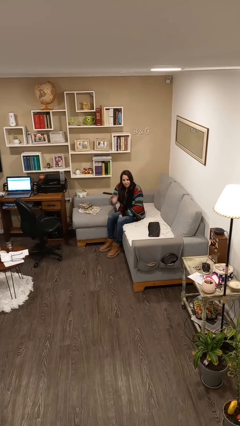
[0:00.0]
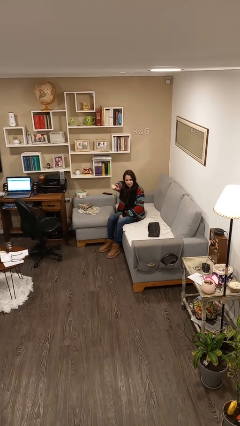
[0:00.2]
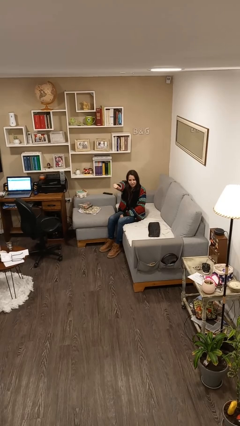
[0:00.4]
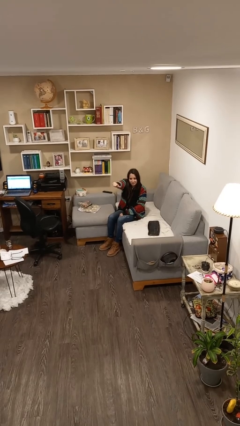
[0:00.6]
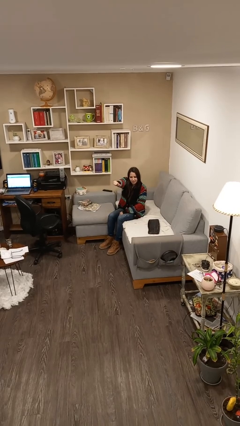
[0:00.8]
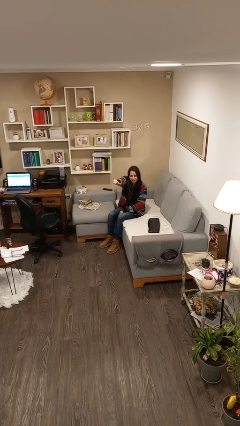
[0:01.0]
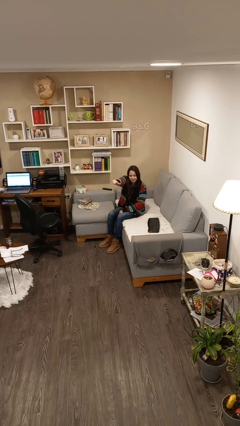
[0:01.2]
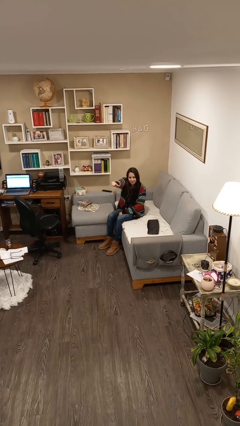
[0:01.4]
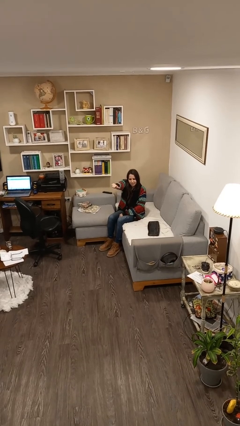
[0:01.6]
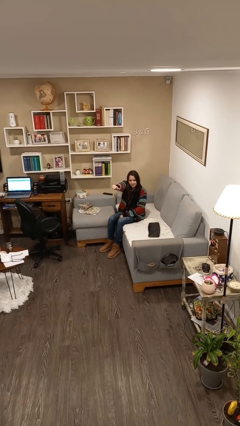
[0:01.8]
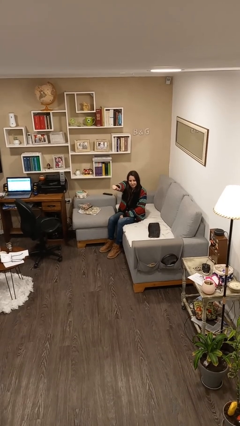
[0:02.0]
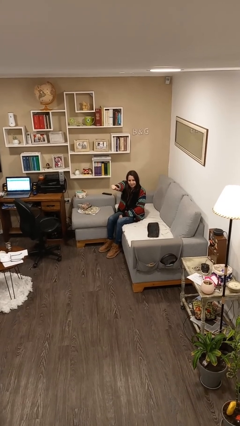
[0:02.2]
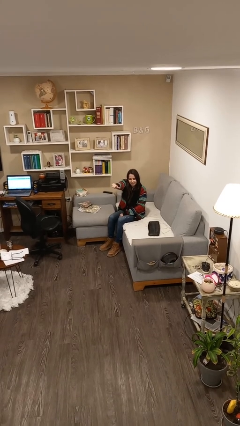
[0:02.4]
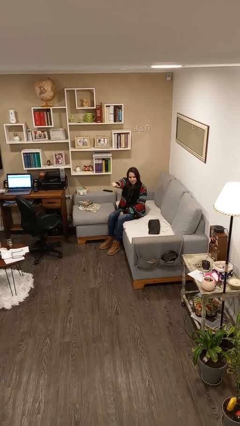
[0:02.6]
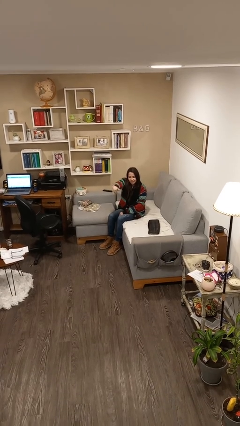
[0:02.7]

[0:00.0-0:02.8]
person gestures thumbs up

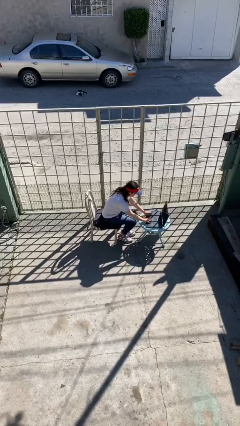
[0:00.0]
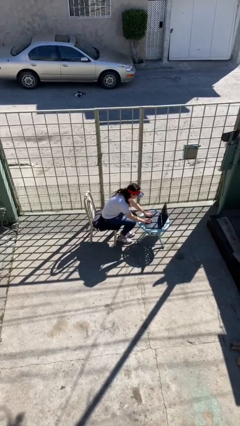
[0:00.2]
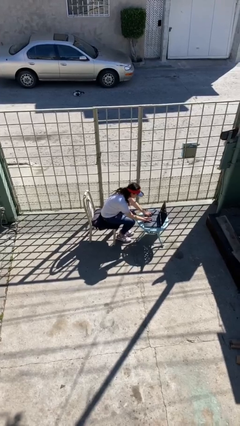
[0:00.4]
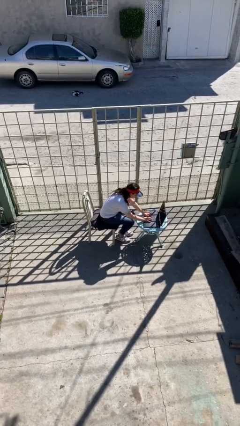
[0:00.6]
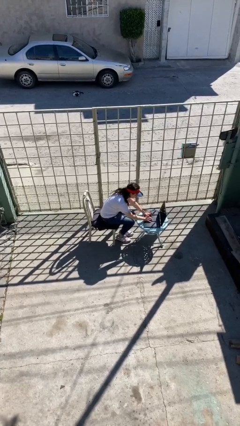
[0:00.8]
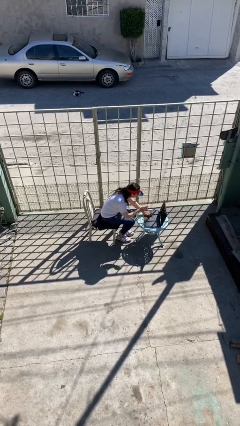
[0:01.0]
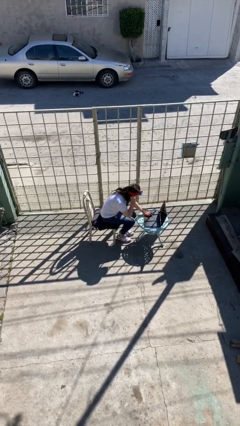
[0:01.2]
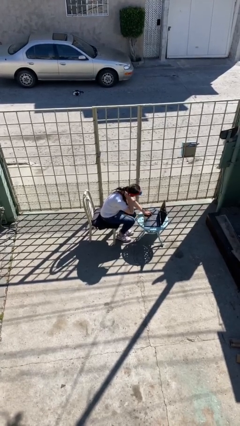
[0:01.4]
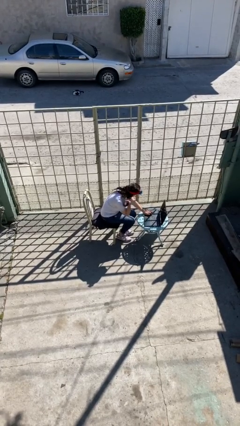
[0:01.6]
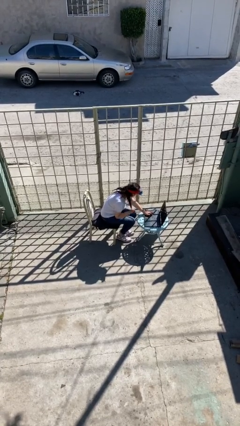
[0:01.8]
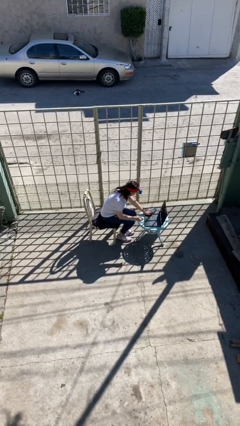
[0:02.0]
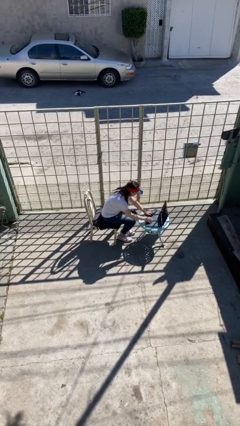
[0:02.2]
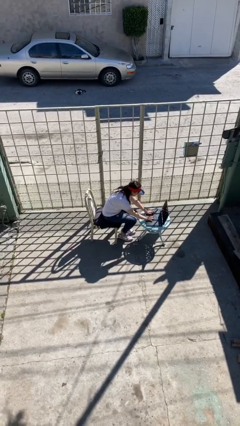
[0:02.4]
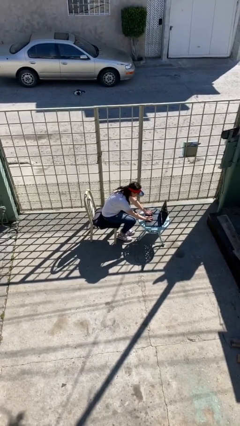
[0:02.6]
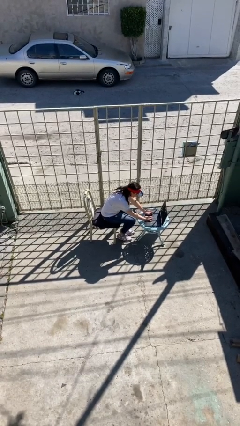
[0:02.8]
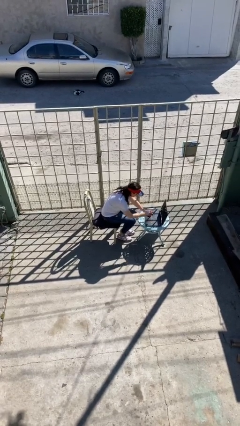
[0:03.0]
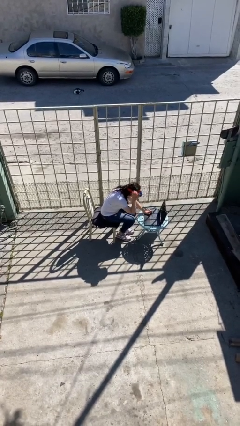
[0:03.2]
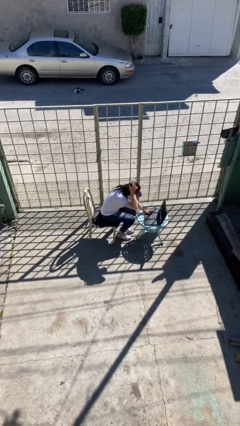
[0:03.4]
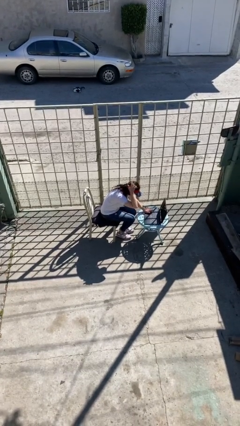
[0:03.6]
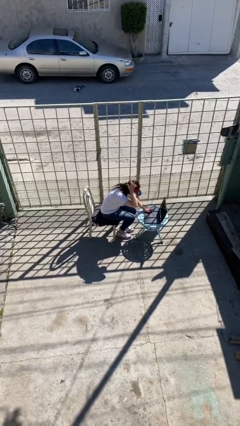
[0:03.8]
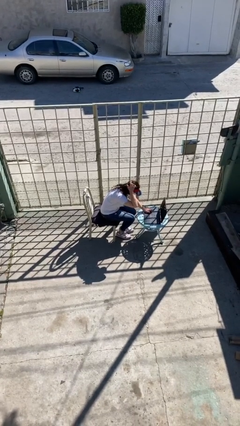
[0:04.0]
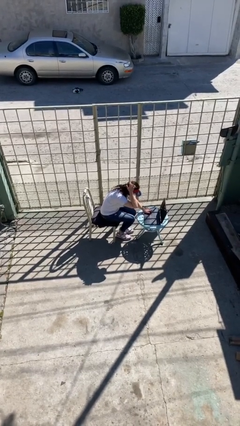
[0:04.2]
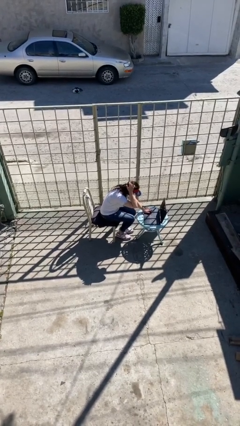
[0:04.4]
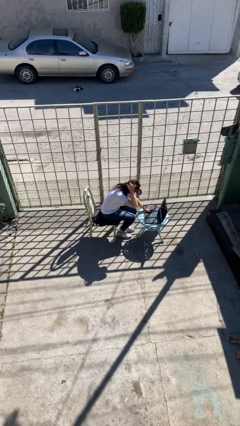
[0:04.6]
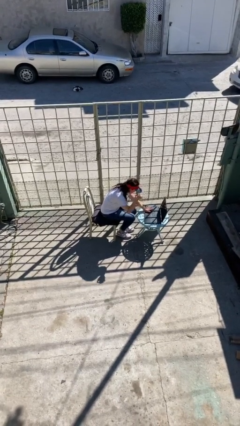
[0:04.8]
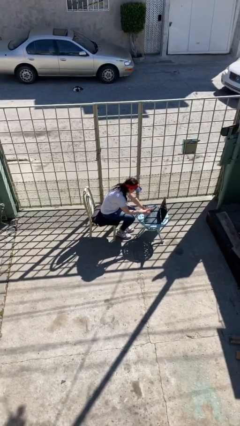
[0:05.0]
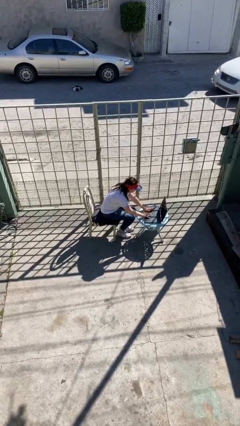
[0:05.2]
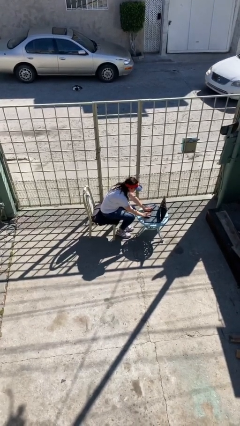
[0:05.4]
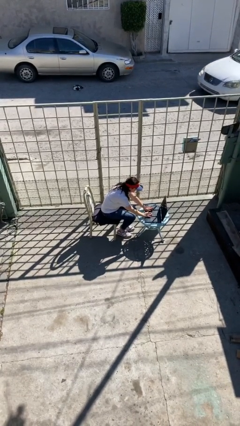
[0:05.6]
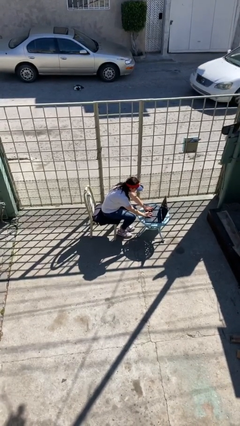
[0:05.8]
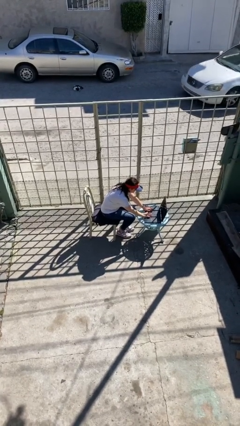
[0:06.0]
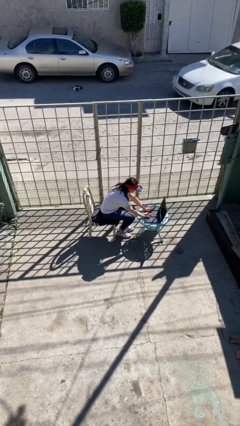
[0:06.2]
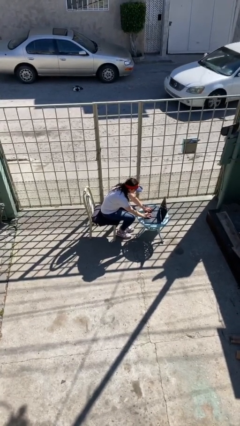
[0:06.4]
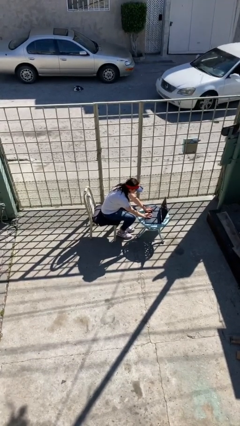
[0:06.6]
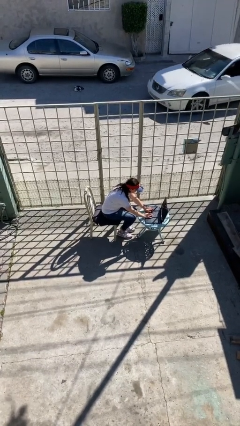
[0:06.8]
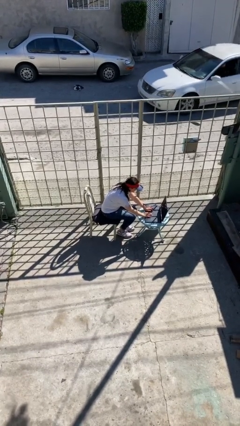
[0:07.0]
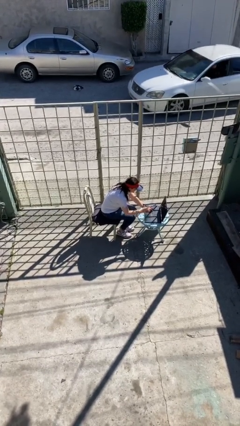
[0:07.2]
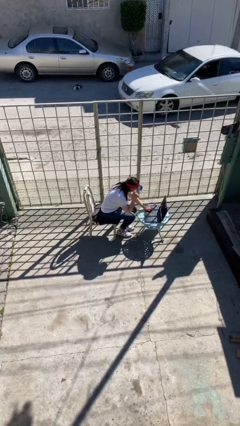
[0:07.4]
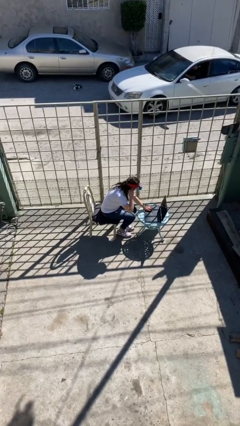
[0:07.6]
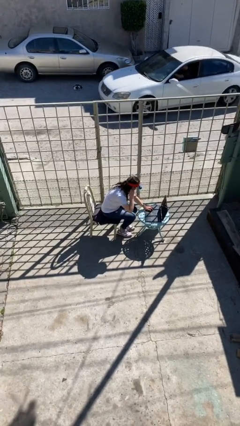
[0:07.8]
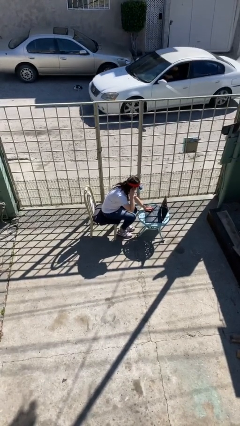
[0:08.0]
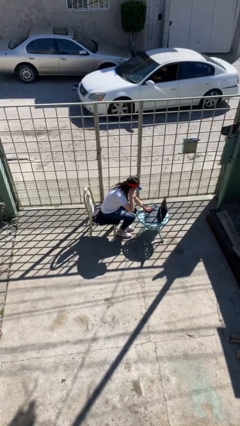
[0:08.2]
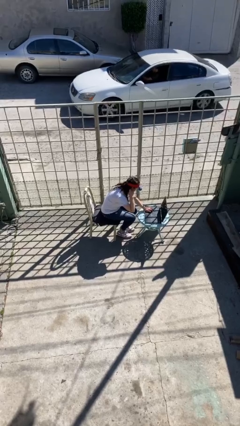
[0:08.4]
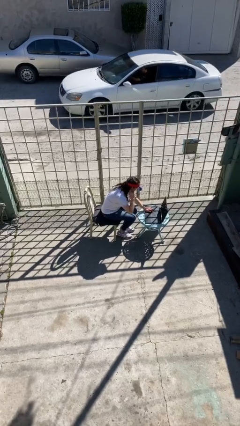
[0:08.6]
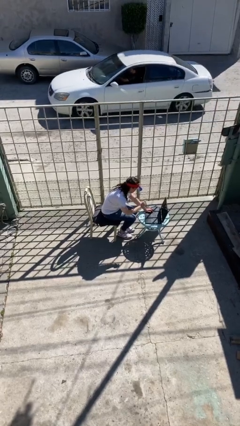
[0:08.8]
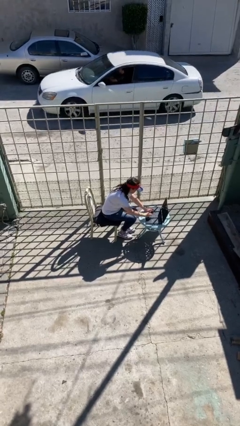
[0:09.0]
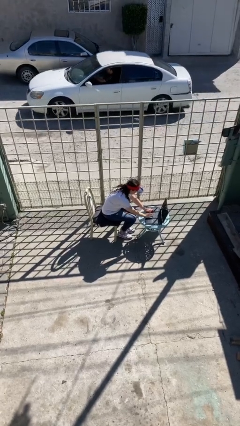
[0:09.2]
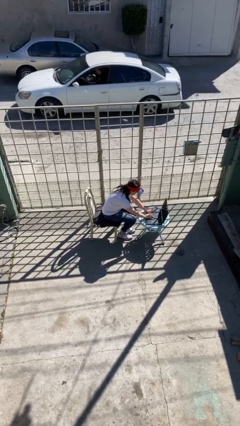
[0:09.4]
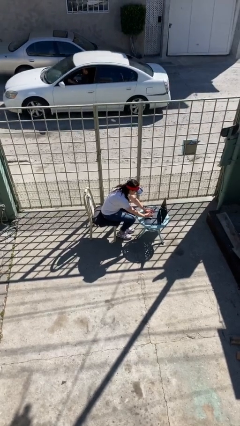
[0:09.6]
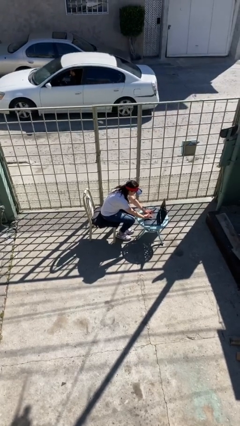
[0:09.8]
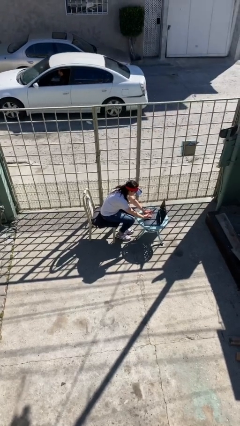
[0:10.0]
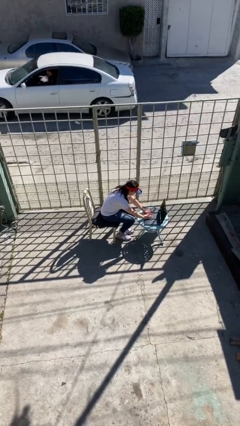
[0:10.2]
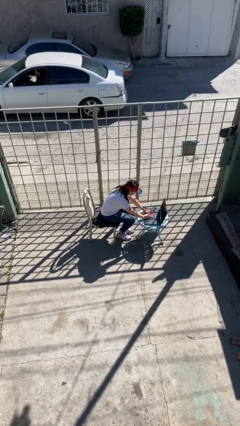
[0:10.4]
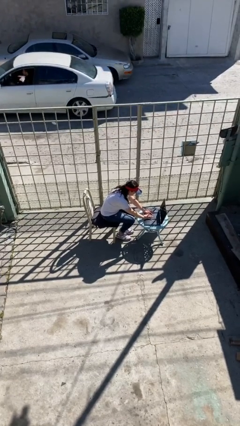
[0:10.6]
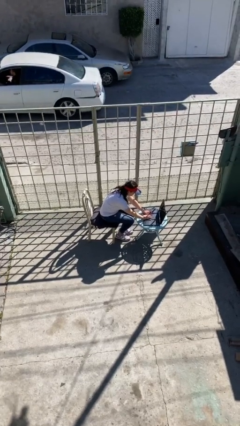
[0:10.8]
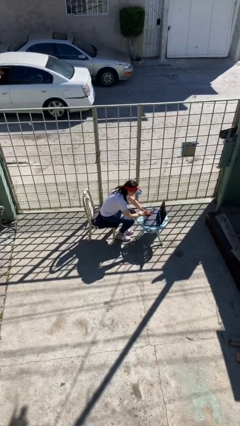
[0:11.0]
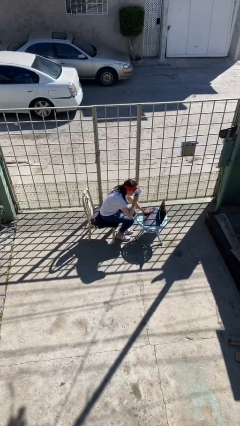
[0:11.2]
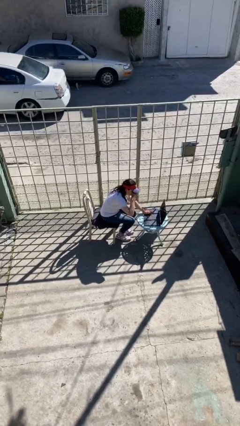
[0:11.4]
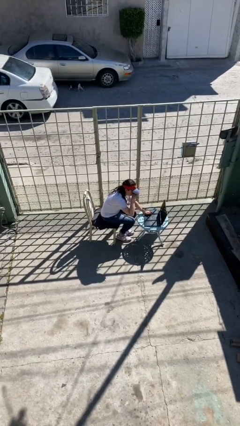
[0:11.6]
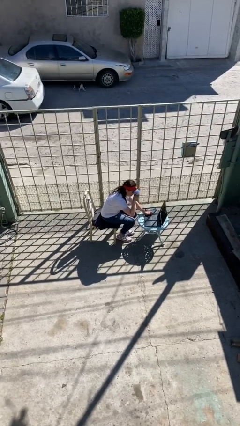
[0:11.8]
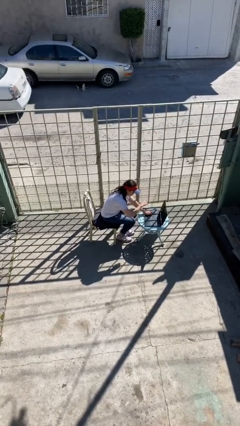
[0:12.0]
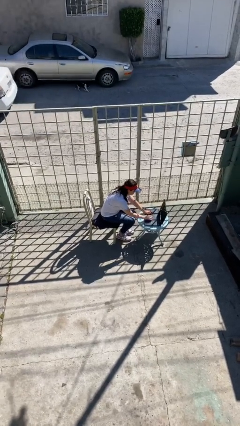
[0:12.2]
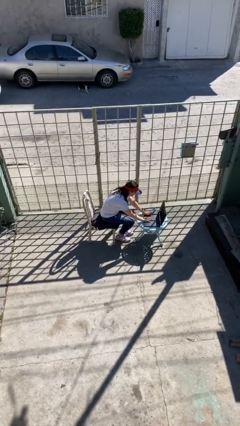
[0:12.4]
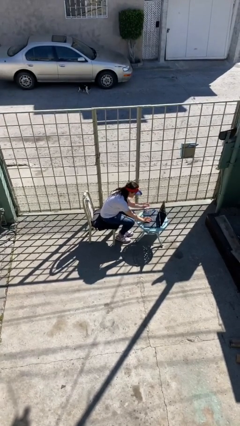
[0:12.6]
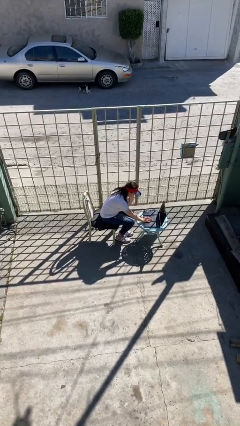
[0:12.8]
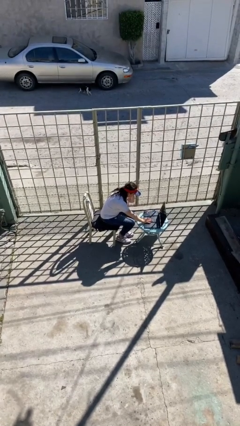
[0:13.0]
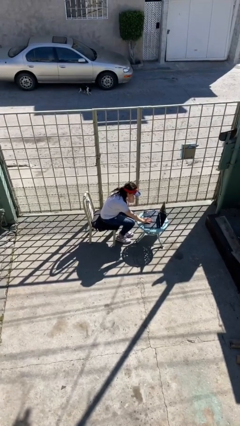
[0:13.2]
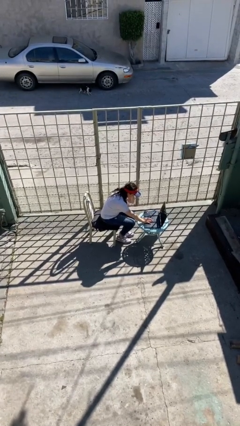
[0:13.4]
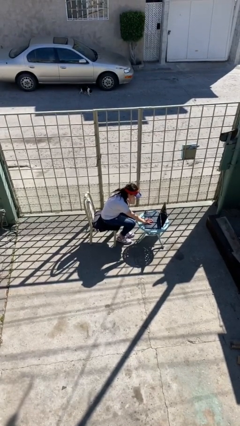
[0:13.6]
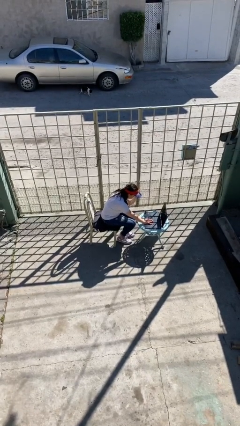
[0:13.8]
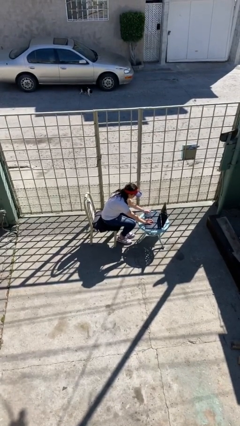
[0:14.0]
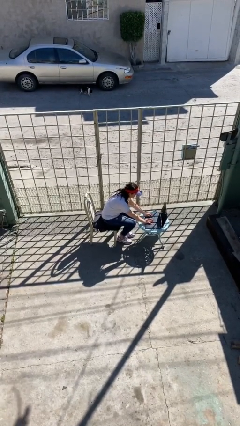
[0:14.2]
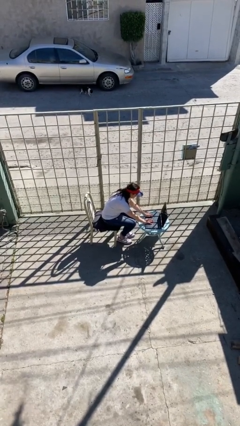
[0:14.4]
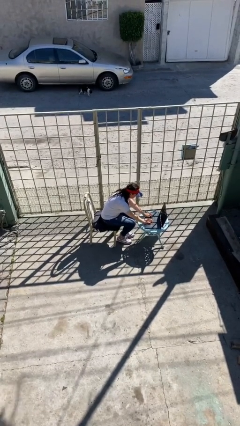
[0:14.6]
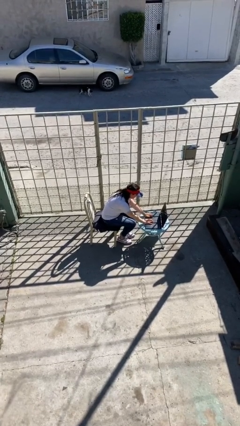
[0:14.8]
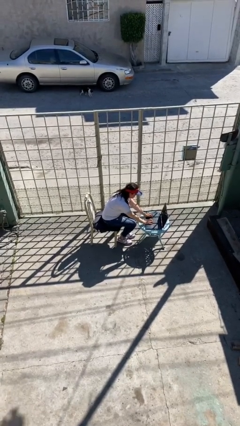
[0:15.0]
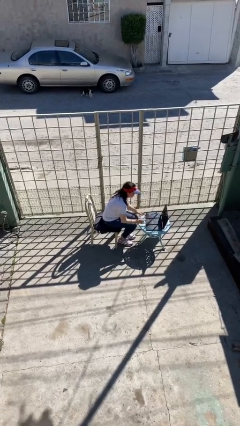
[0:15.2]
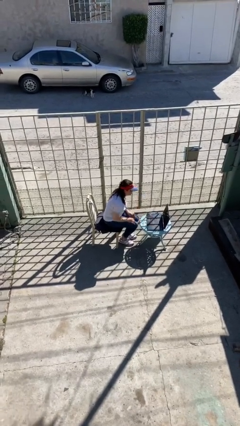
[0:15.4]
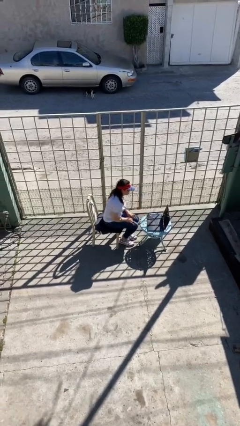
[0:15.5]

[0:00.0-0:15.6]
person interacts with laptop
